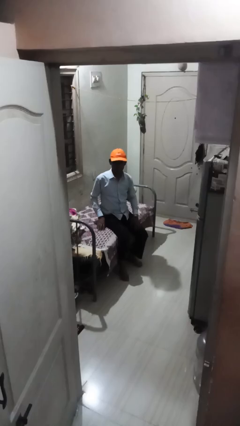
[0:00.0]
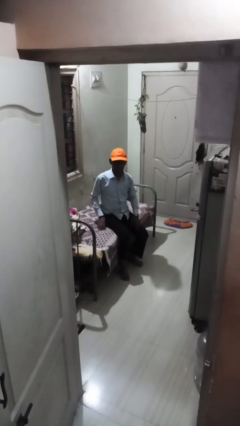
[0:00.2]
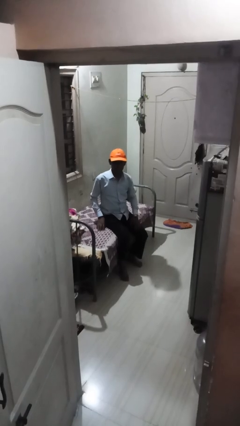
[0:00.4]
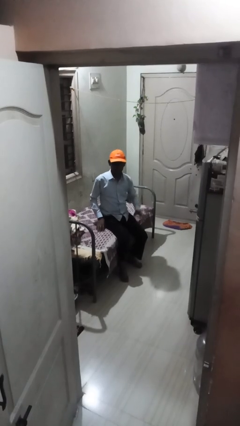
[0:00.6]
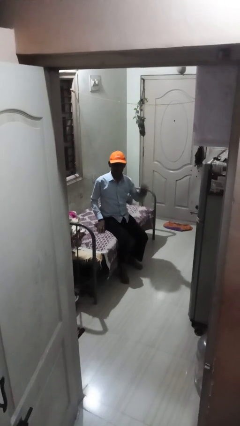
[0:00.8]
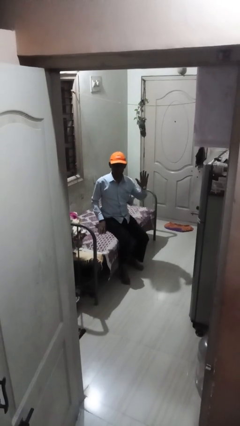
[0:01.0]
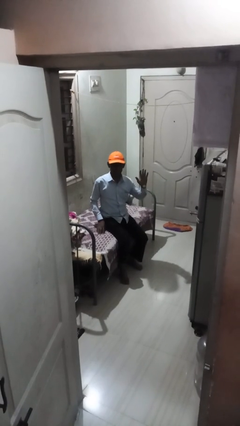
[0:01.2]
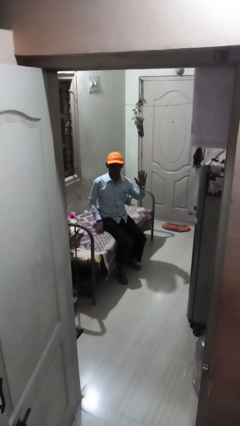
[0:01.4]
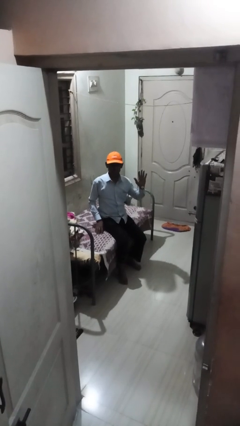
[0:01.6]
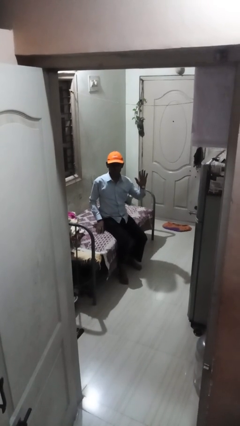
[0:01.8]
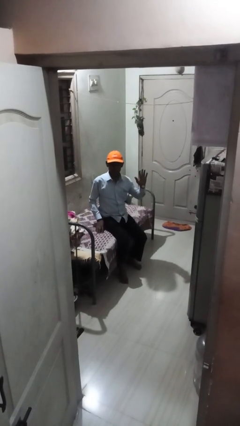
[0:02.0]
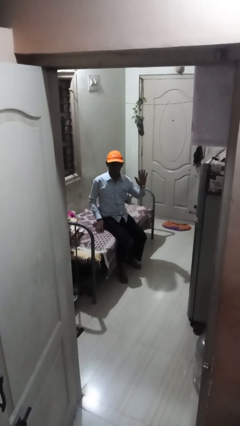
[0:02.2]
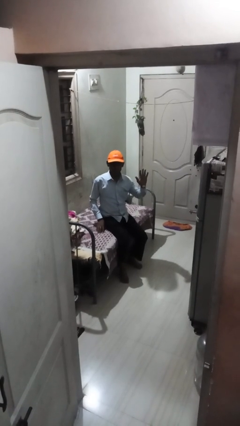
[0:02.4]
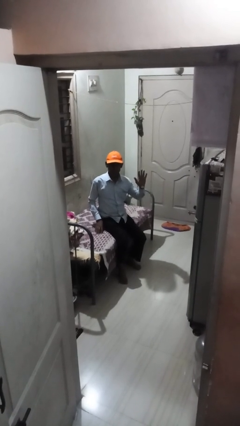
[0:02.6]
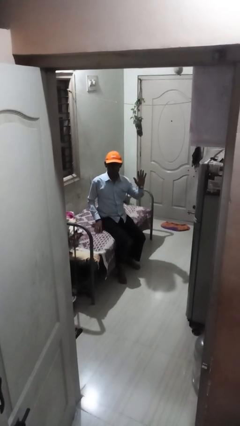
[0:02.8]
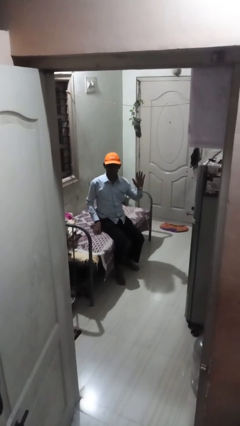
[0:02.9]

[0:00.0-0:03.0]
person gestures number five

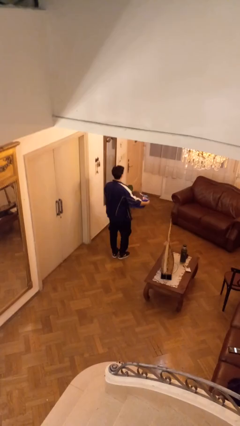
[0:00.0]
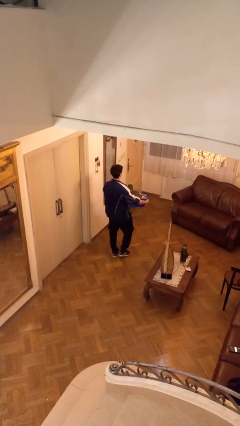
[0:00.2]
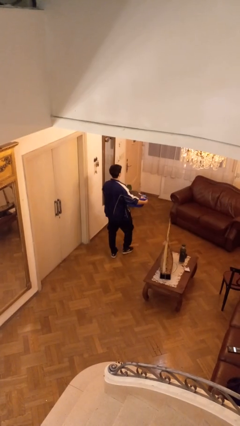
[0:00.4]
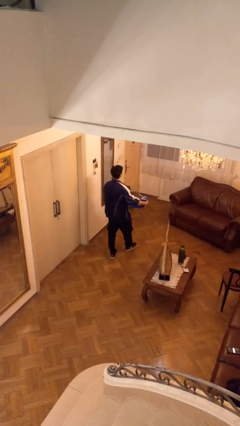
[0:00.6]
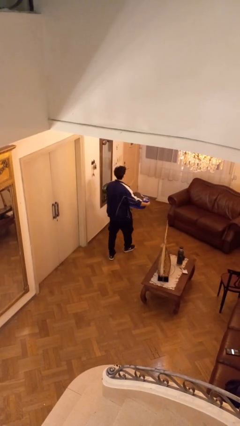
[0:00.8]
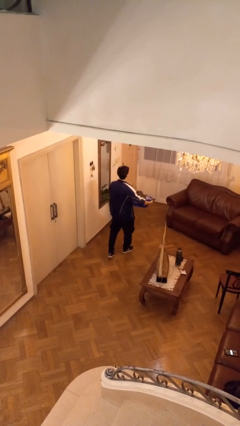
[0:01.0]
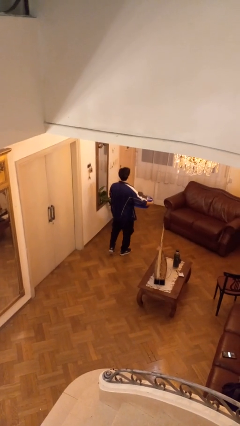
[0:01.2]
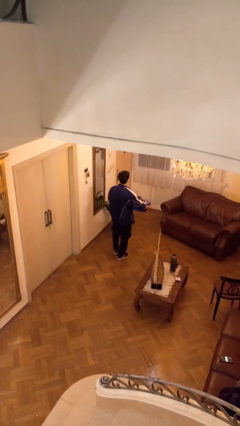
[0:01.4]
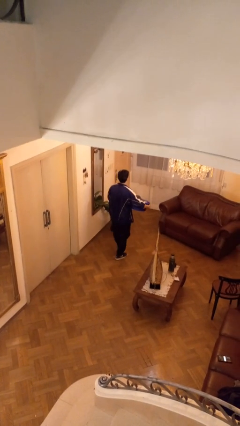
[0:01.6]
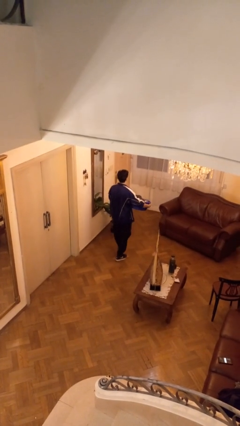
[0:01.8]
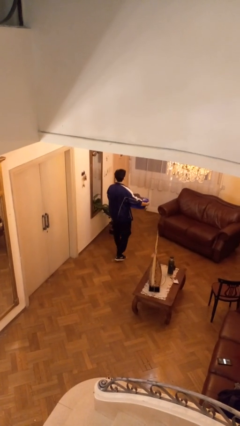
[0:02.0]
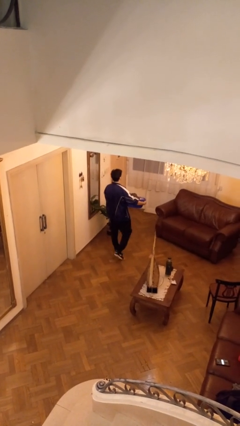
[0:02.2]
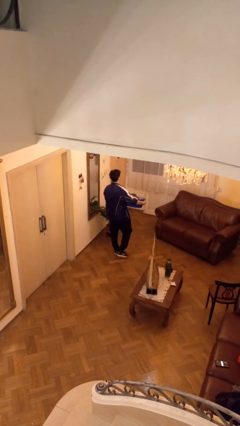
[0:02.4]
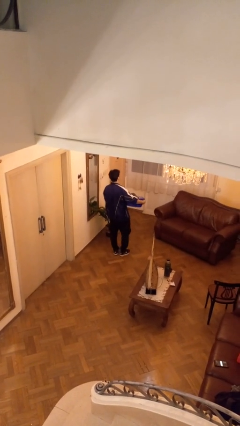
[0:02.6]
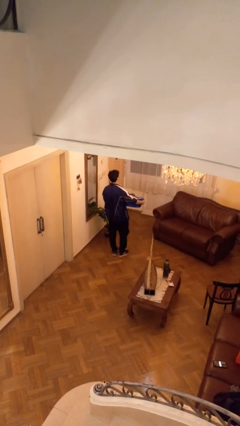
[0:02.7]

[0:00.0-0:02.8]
person carries laundry basket

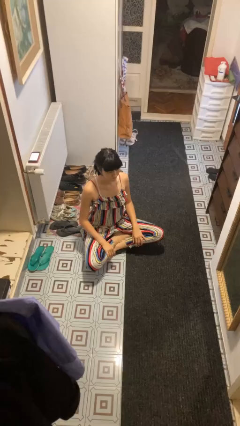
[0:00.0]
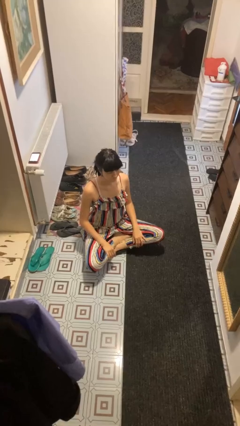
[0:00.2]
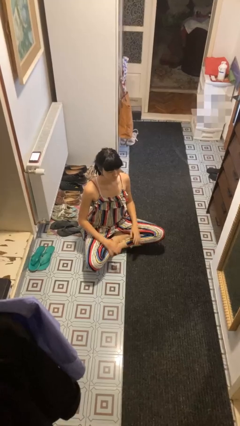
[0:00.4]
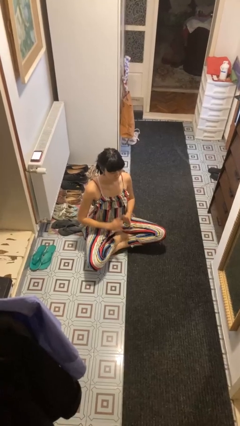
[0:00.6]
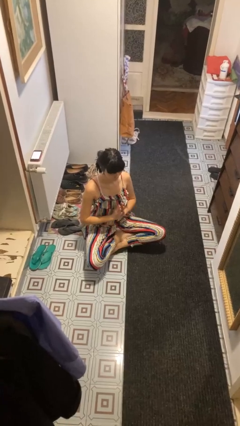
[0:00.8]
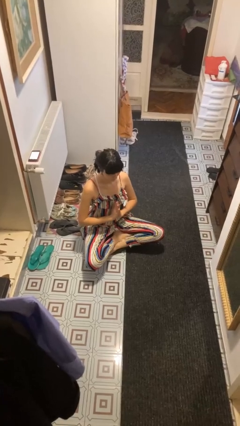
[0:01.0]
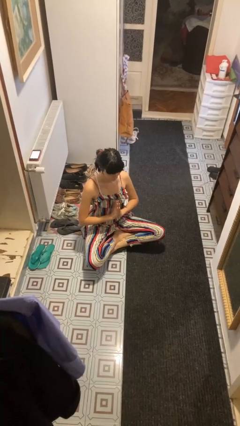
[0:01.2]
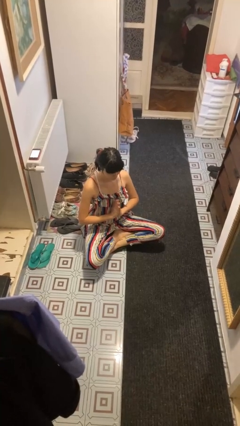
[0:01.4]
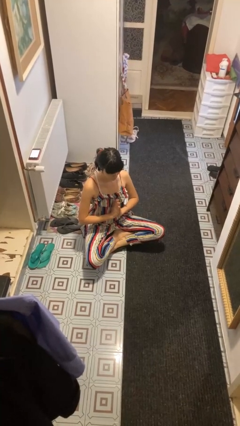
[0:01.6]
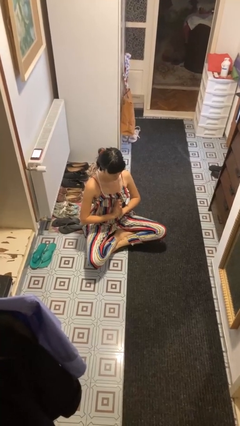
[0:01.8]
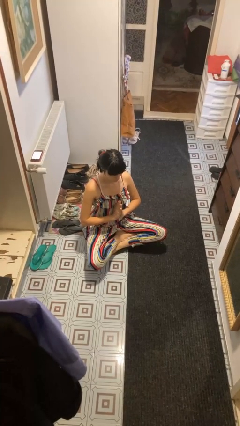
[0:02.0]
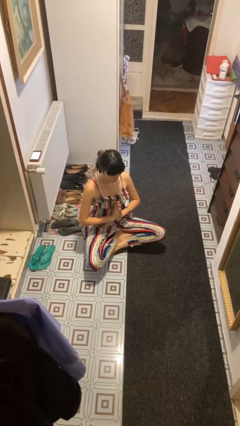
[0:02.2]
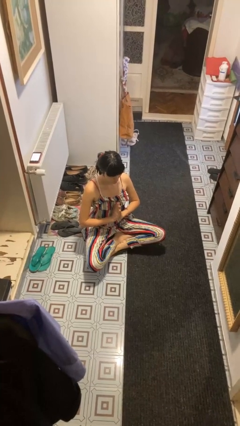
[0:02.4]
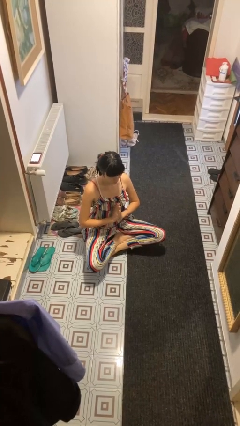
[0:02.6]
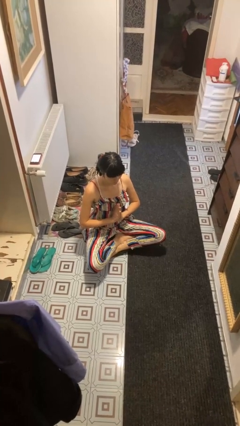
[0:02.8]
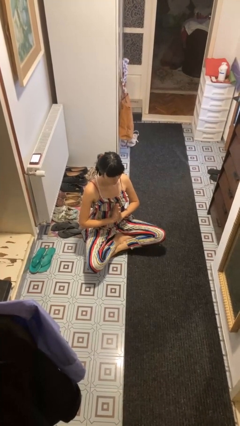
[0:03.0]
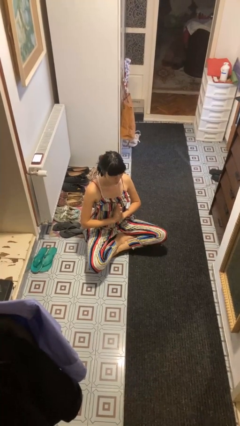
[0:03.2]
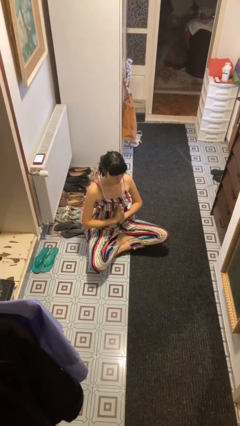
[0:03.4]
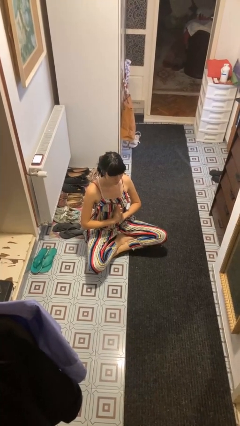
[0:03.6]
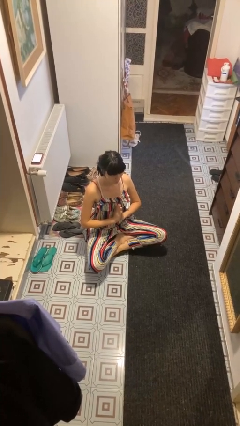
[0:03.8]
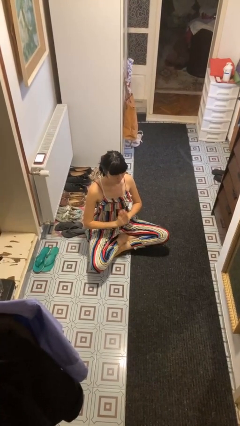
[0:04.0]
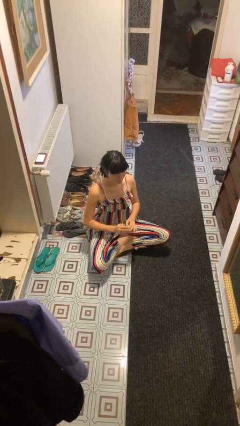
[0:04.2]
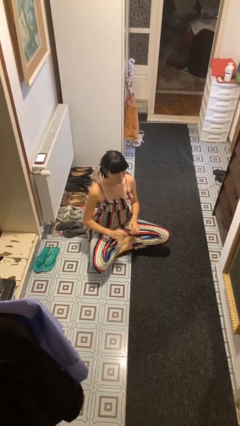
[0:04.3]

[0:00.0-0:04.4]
person prays

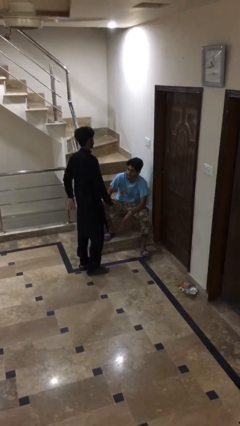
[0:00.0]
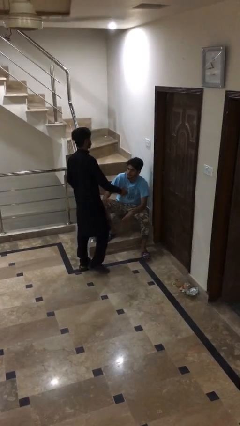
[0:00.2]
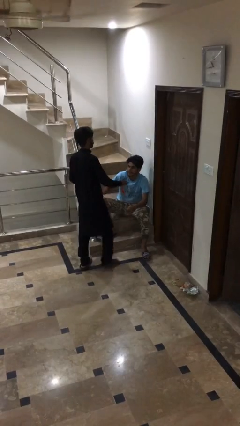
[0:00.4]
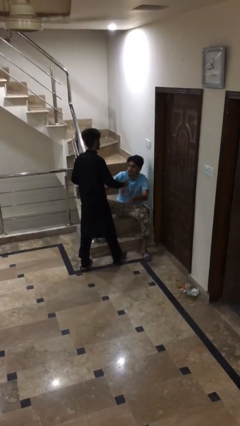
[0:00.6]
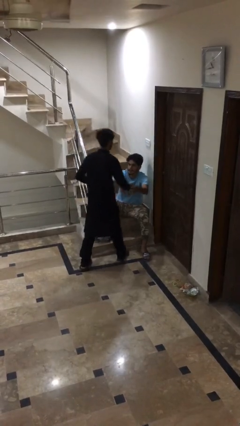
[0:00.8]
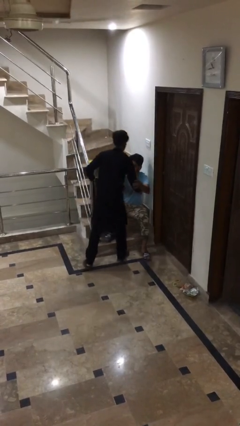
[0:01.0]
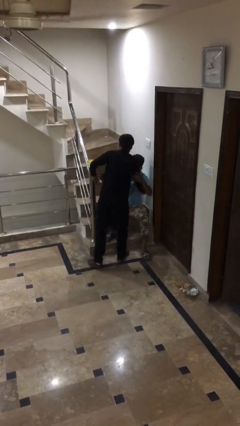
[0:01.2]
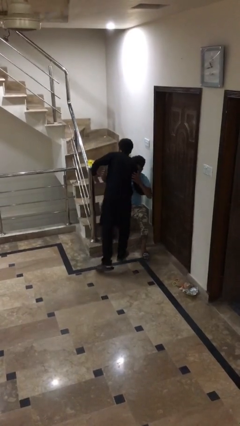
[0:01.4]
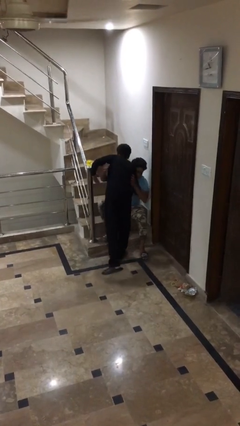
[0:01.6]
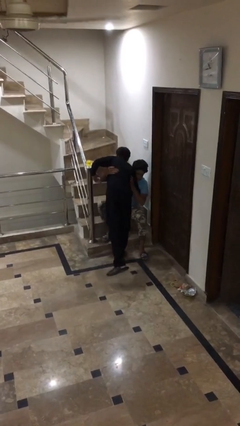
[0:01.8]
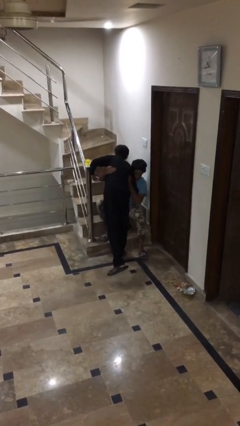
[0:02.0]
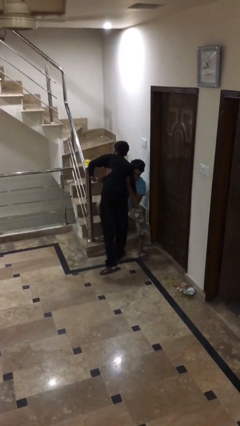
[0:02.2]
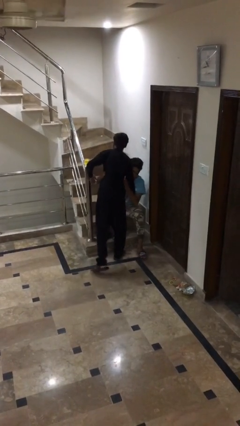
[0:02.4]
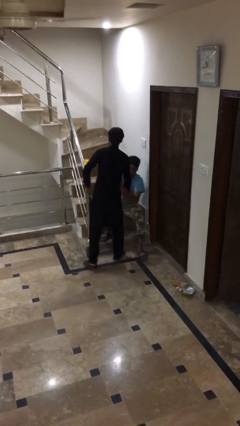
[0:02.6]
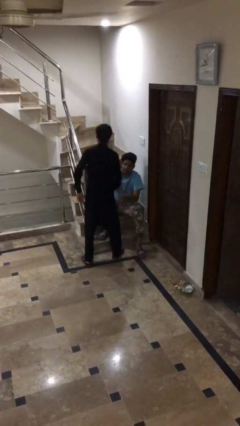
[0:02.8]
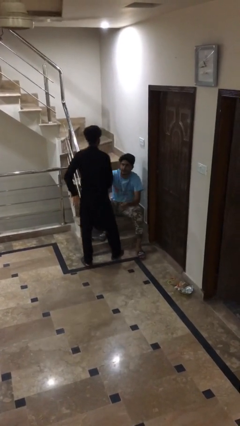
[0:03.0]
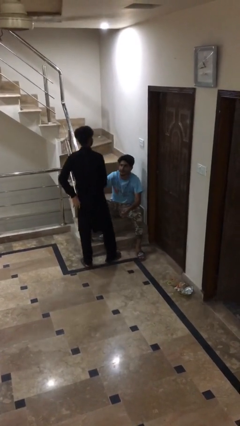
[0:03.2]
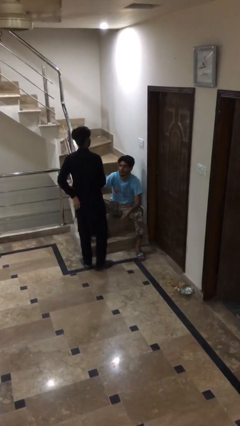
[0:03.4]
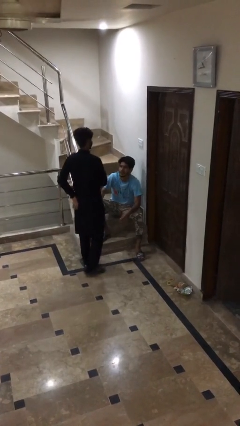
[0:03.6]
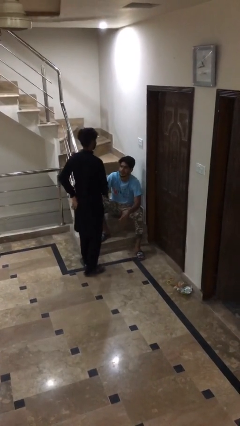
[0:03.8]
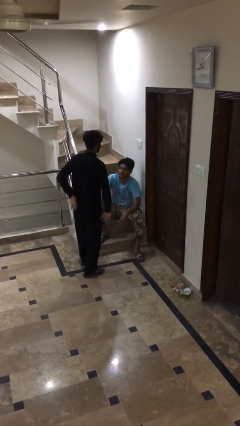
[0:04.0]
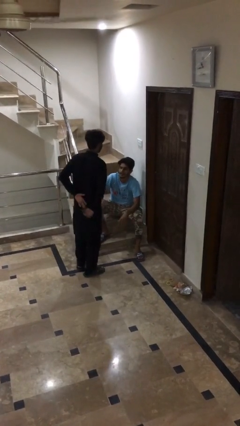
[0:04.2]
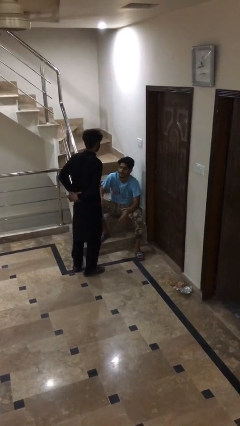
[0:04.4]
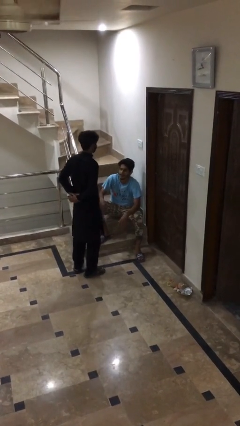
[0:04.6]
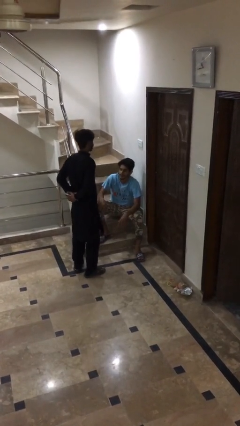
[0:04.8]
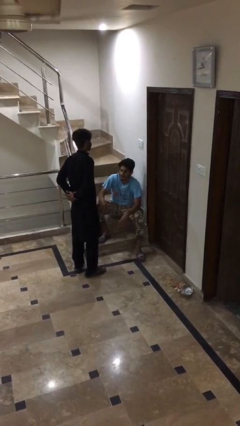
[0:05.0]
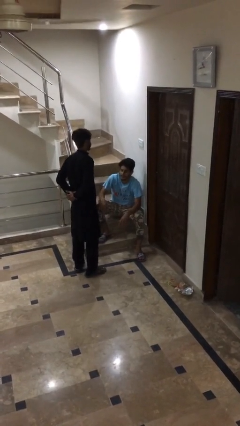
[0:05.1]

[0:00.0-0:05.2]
person embraces person

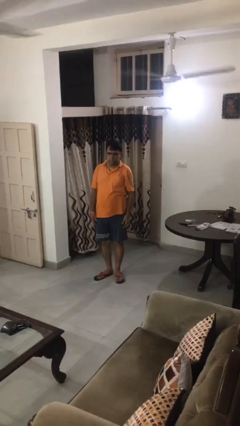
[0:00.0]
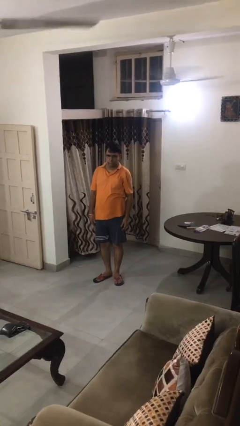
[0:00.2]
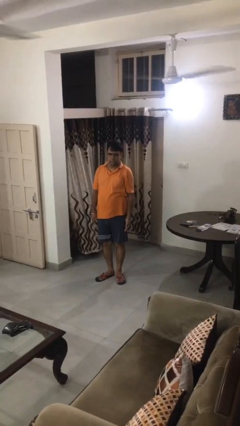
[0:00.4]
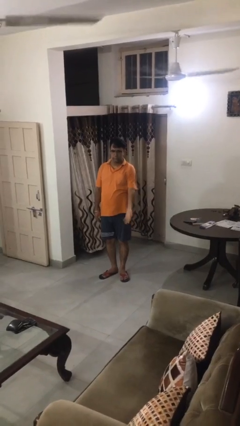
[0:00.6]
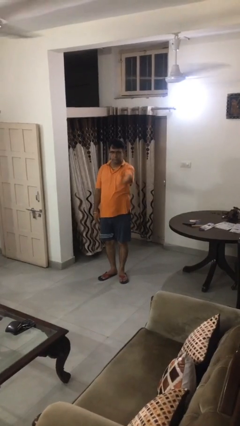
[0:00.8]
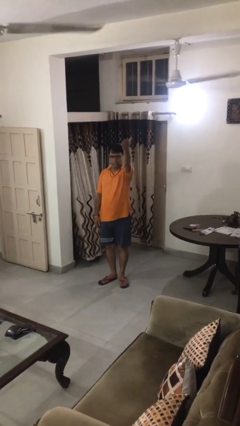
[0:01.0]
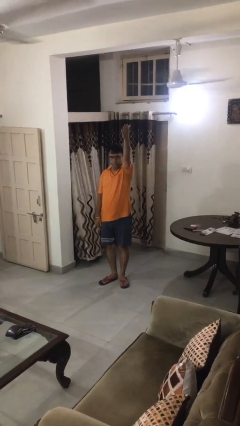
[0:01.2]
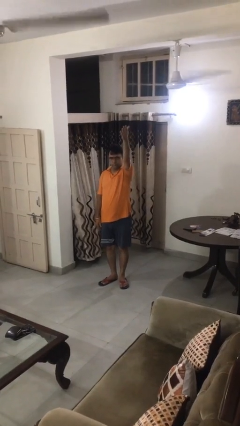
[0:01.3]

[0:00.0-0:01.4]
person gestures swipe up

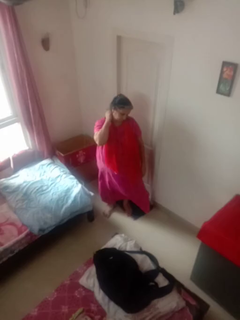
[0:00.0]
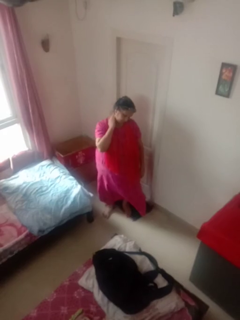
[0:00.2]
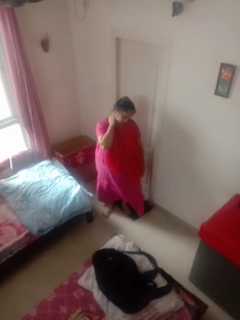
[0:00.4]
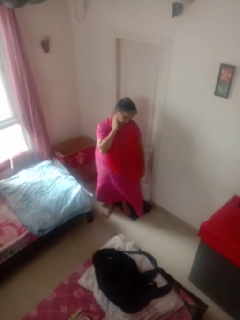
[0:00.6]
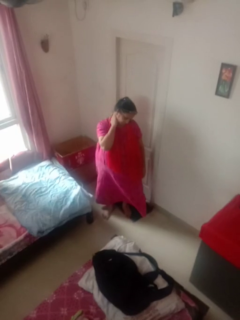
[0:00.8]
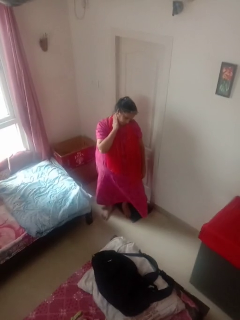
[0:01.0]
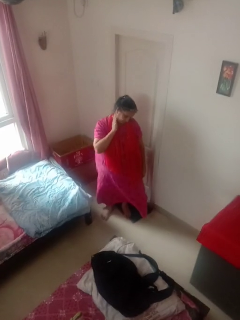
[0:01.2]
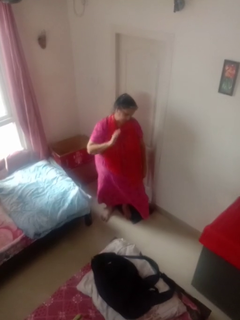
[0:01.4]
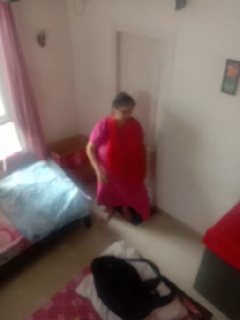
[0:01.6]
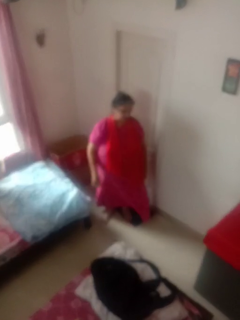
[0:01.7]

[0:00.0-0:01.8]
person rubs neck
